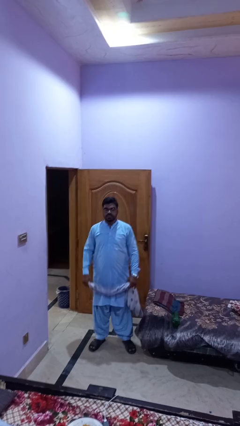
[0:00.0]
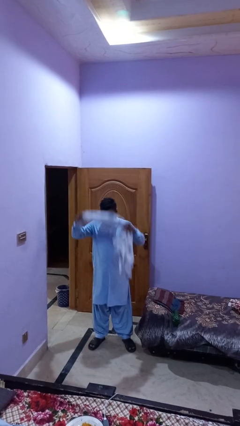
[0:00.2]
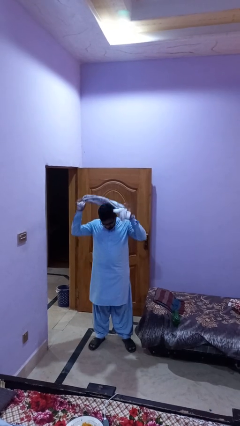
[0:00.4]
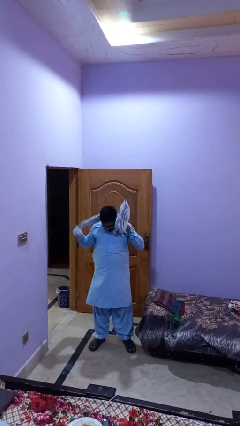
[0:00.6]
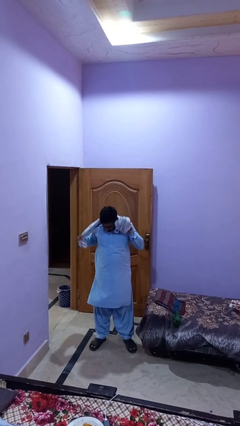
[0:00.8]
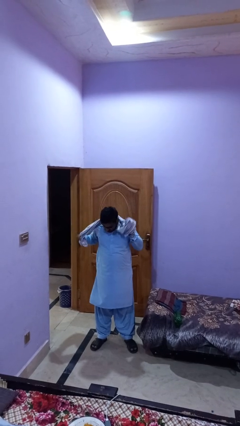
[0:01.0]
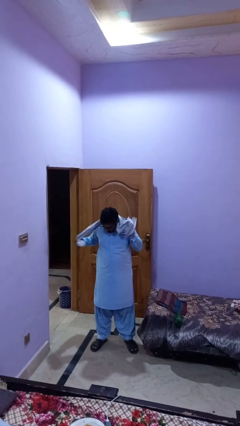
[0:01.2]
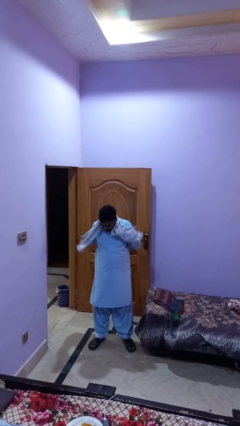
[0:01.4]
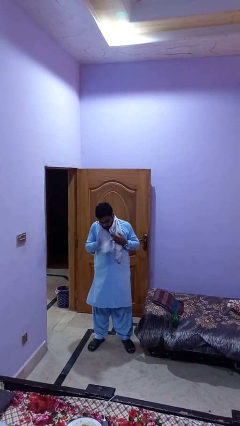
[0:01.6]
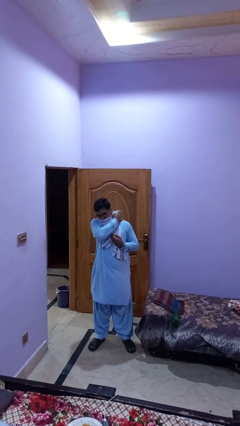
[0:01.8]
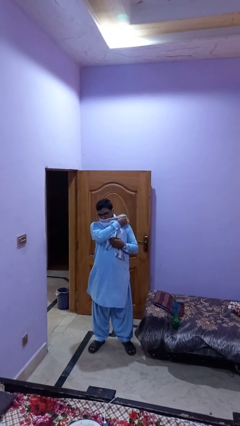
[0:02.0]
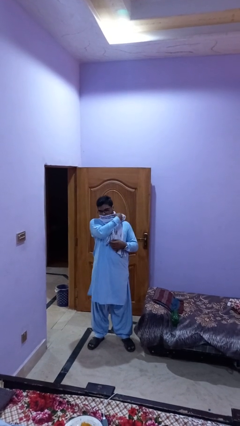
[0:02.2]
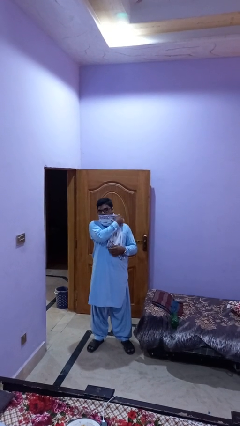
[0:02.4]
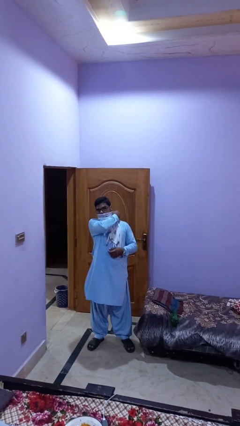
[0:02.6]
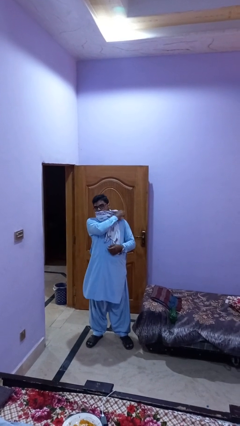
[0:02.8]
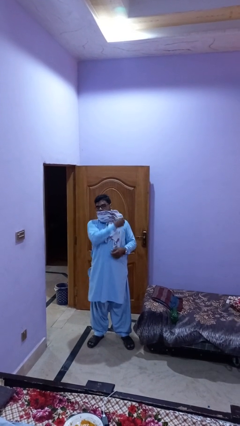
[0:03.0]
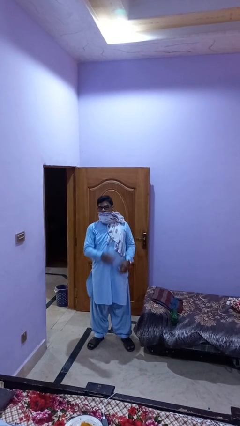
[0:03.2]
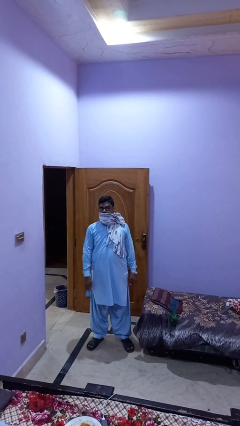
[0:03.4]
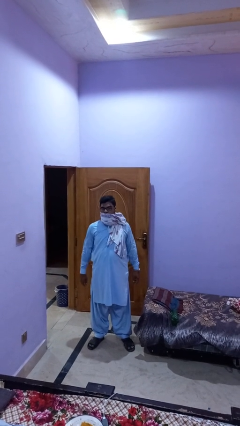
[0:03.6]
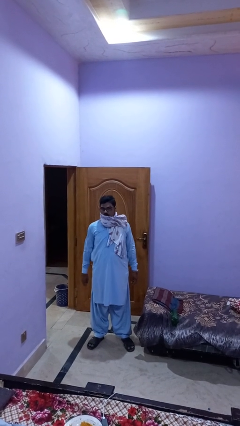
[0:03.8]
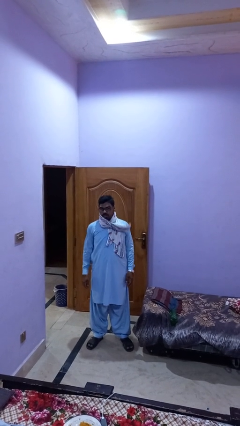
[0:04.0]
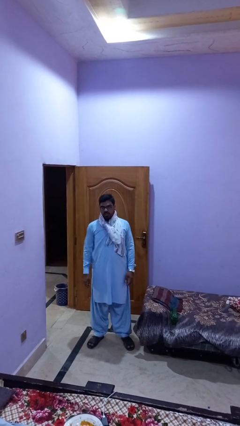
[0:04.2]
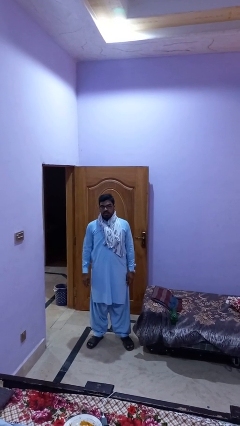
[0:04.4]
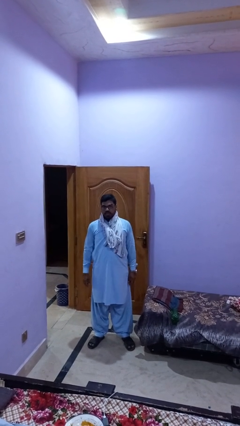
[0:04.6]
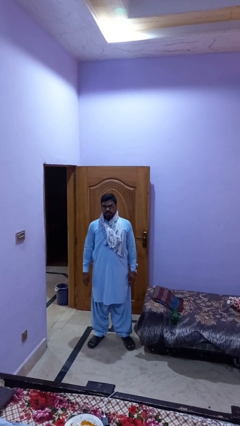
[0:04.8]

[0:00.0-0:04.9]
person puts on scarf

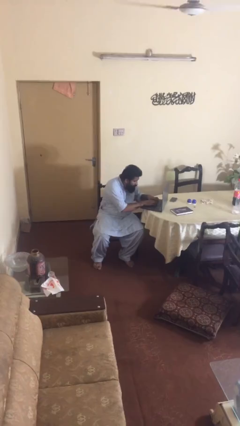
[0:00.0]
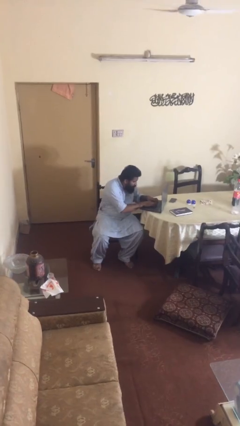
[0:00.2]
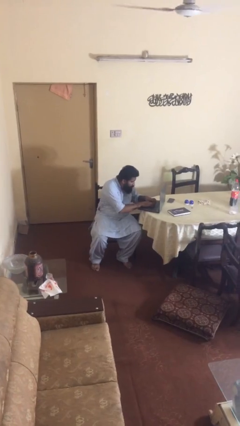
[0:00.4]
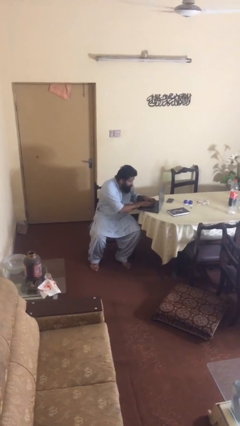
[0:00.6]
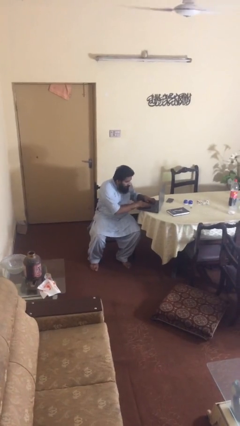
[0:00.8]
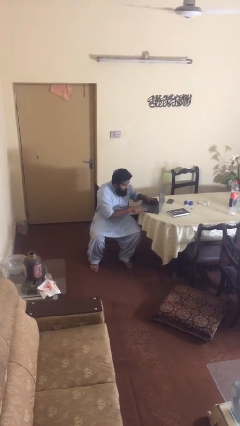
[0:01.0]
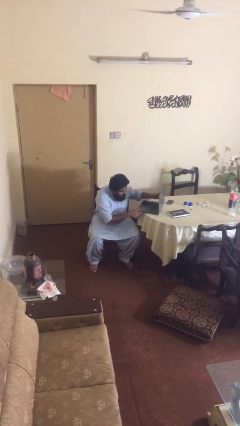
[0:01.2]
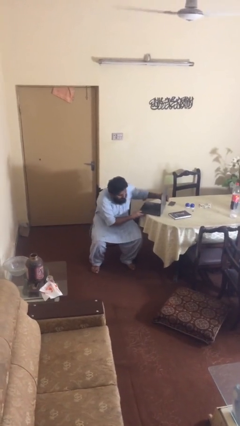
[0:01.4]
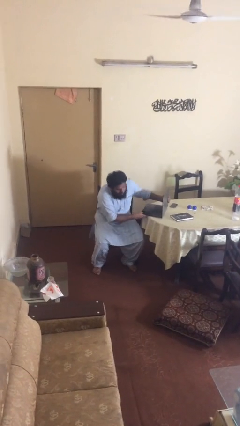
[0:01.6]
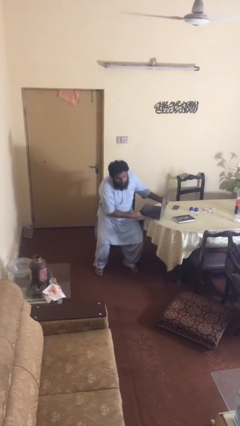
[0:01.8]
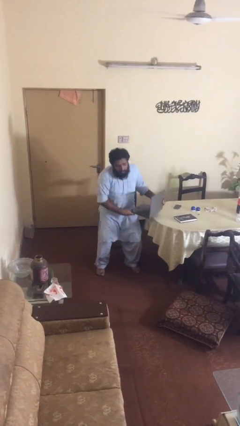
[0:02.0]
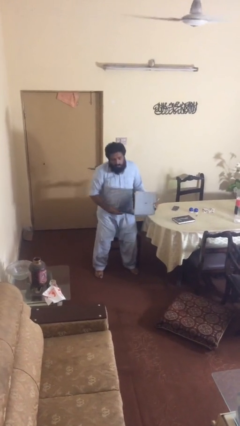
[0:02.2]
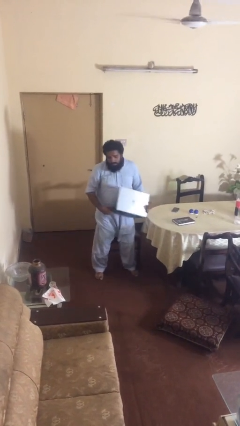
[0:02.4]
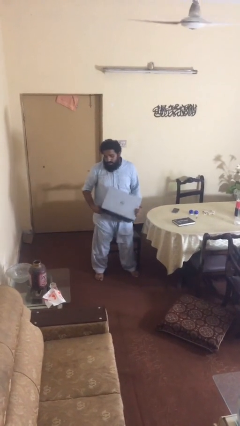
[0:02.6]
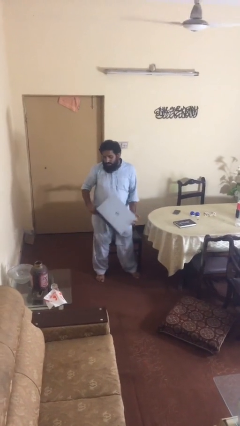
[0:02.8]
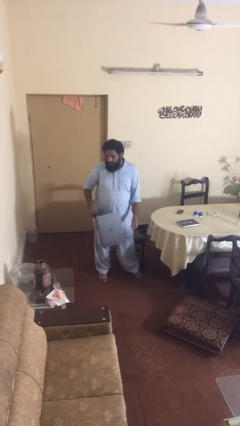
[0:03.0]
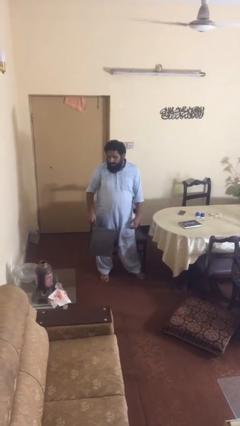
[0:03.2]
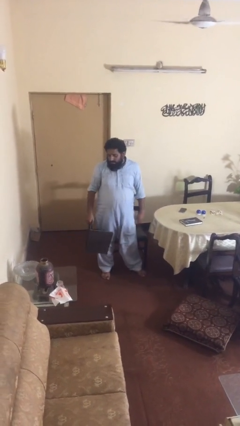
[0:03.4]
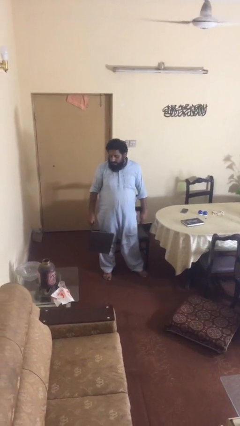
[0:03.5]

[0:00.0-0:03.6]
person stands up

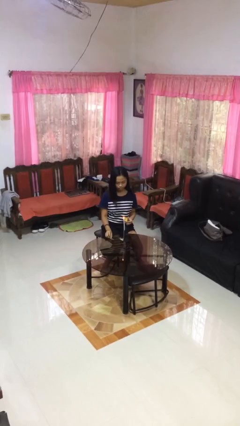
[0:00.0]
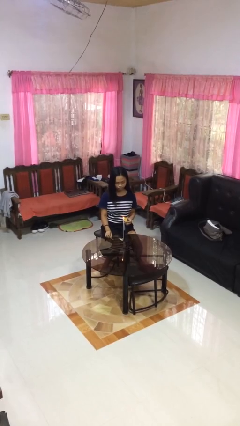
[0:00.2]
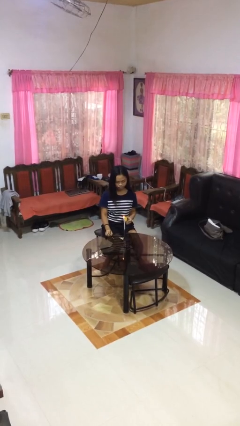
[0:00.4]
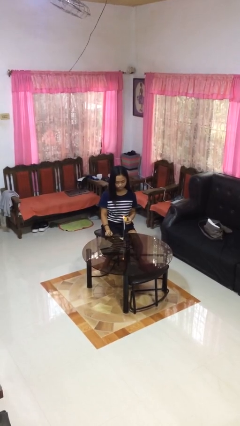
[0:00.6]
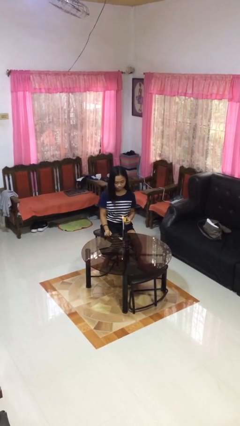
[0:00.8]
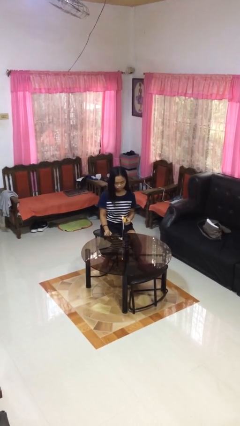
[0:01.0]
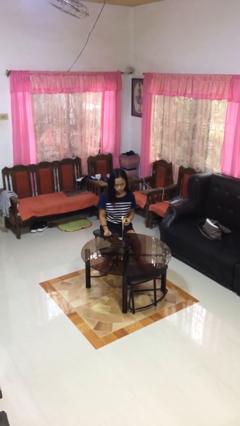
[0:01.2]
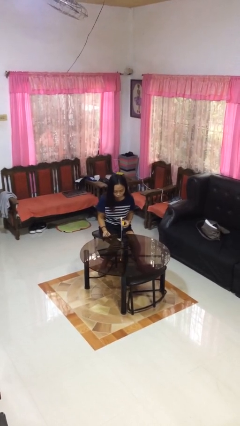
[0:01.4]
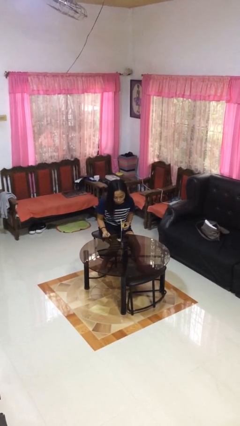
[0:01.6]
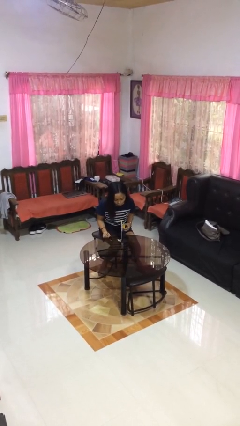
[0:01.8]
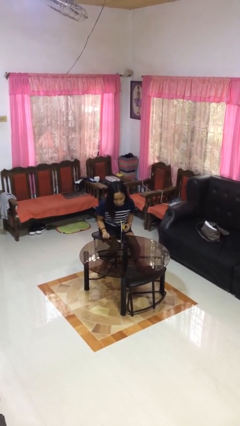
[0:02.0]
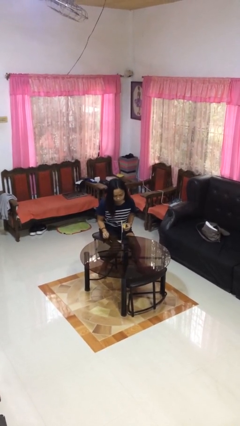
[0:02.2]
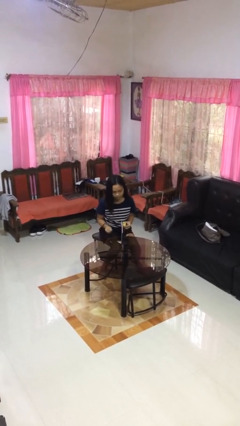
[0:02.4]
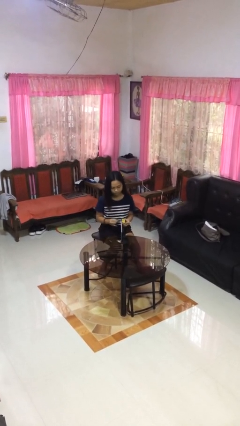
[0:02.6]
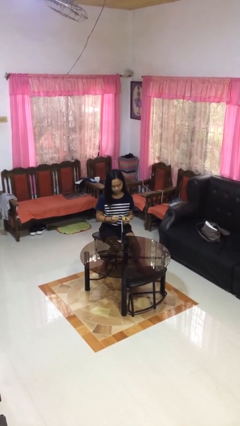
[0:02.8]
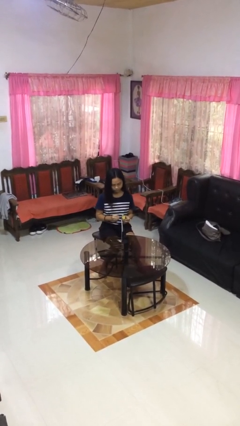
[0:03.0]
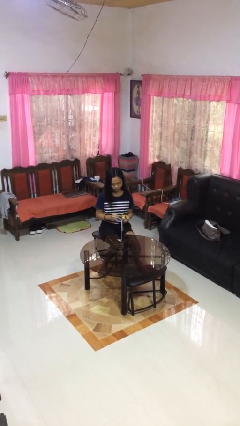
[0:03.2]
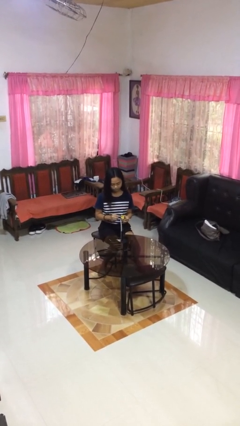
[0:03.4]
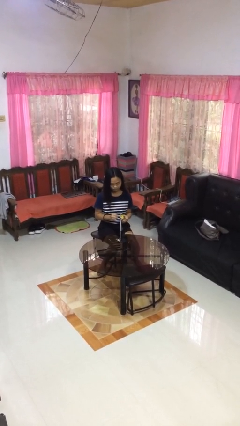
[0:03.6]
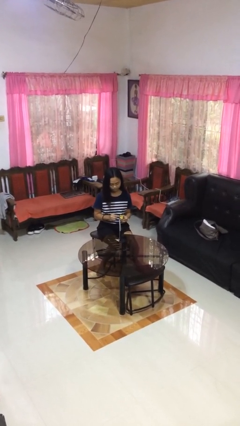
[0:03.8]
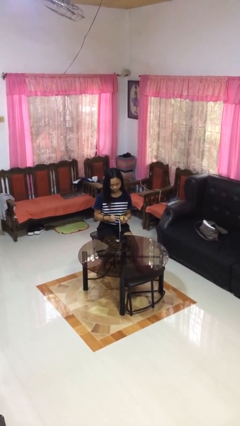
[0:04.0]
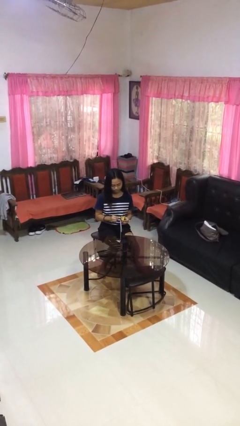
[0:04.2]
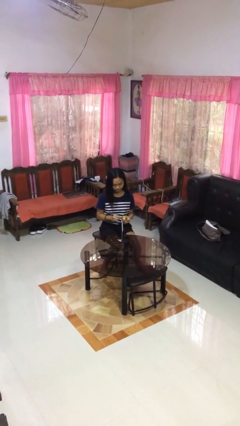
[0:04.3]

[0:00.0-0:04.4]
person extinguishes candle

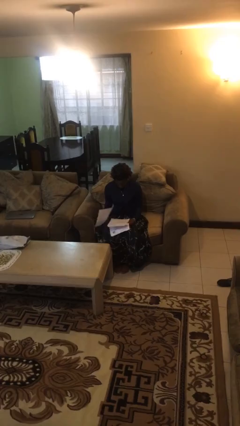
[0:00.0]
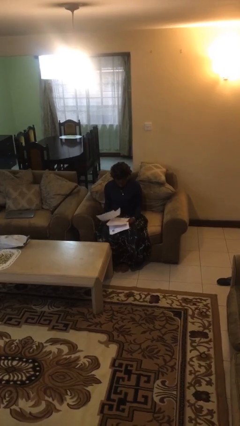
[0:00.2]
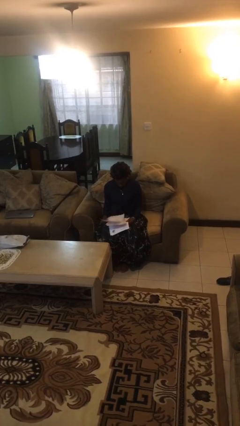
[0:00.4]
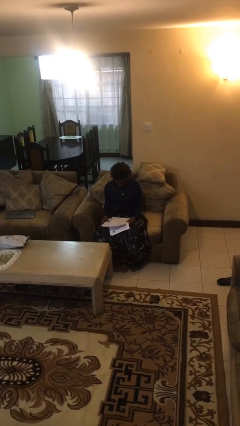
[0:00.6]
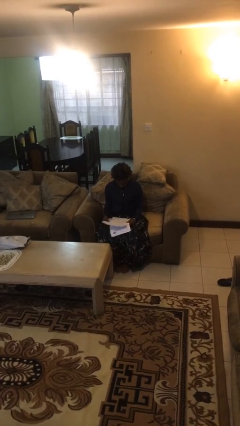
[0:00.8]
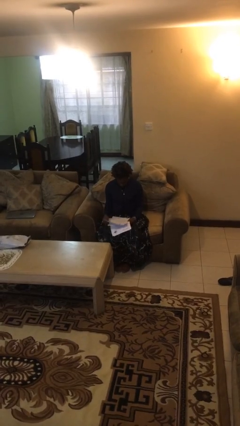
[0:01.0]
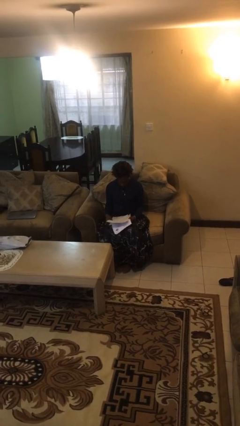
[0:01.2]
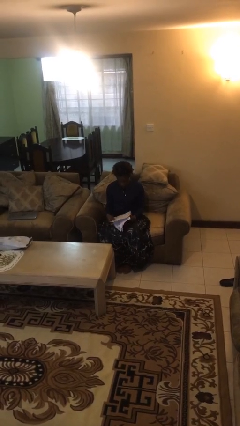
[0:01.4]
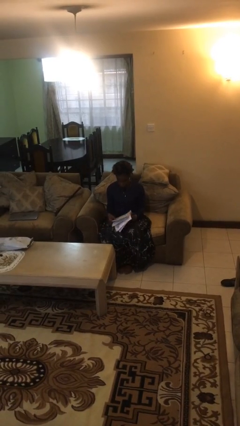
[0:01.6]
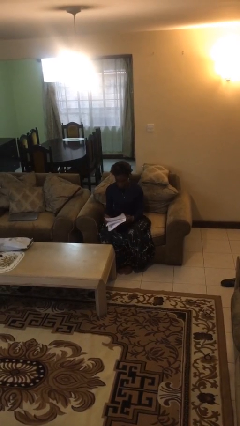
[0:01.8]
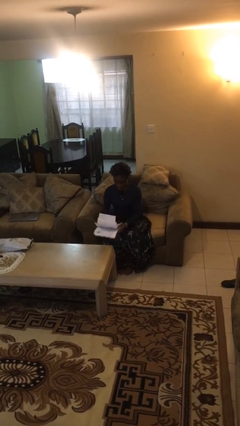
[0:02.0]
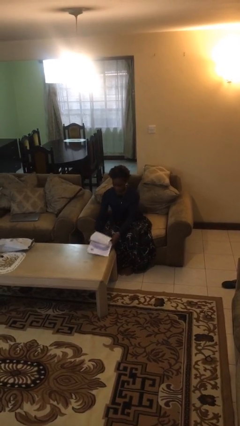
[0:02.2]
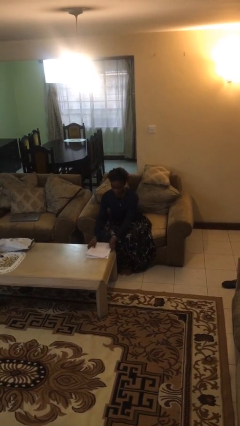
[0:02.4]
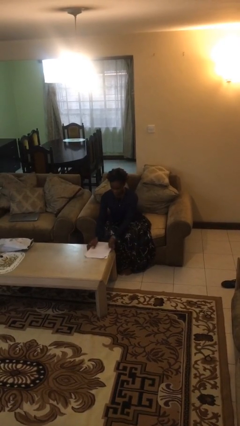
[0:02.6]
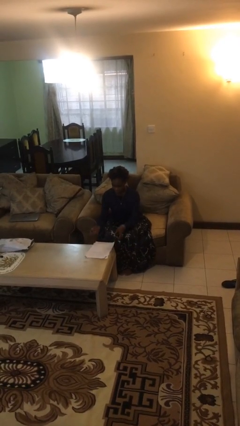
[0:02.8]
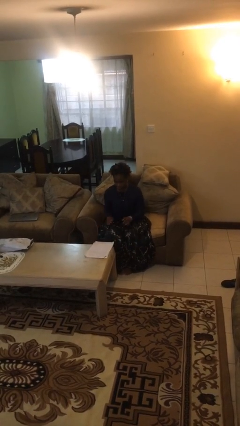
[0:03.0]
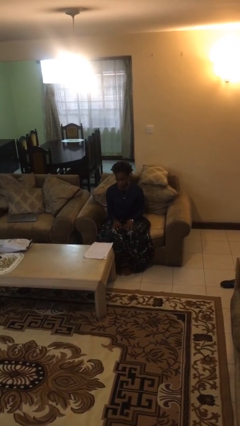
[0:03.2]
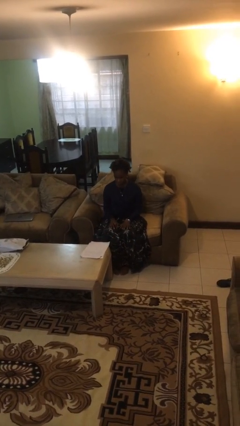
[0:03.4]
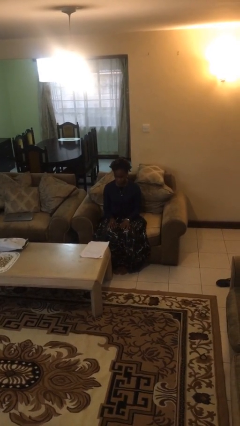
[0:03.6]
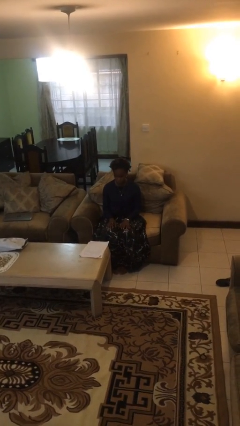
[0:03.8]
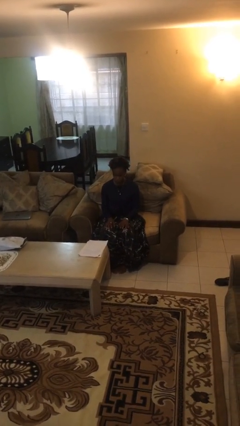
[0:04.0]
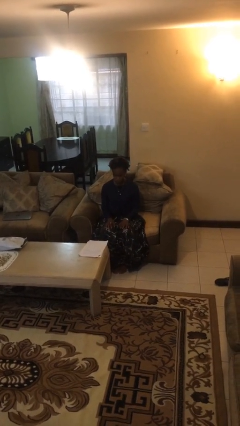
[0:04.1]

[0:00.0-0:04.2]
person puts down object on table

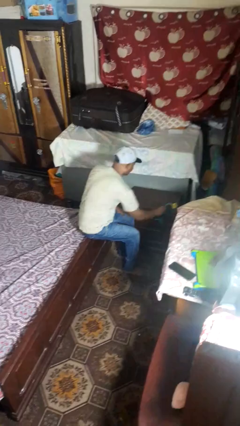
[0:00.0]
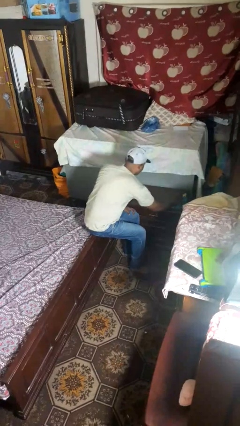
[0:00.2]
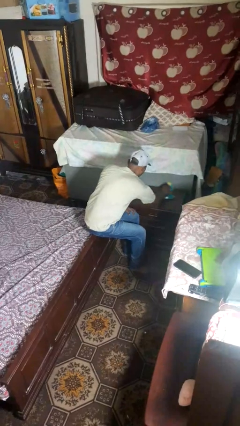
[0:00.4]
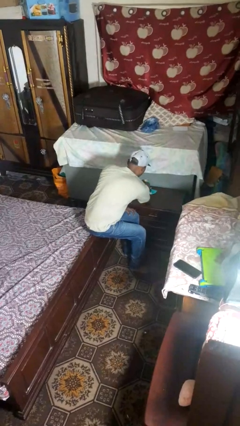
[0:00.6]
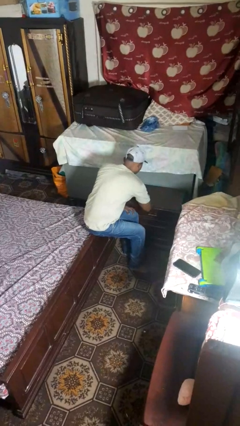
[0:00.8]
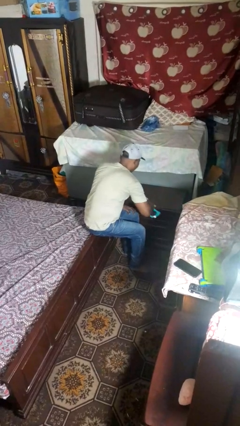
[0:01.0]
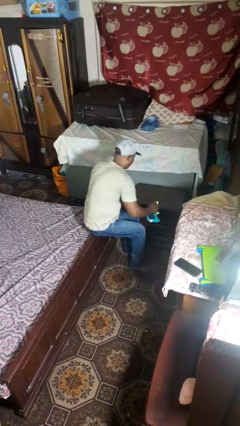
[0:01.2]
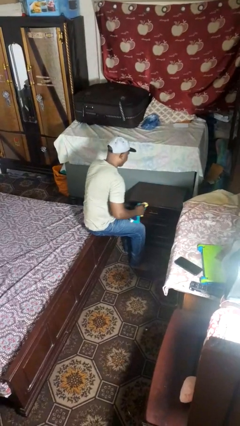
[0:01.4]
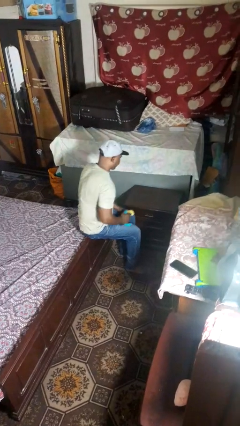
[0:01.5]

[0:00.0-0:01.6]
person cleans table with rag
